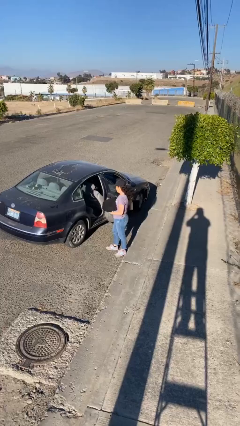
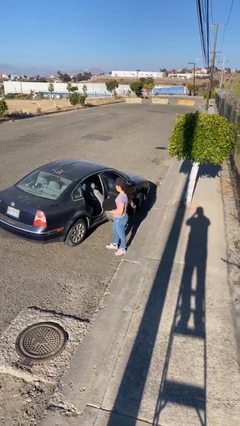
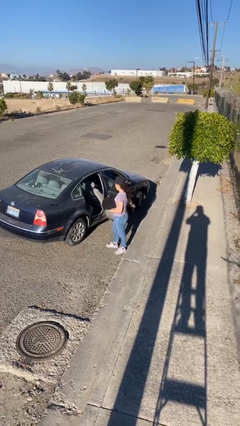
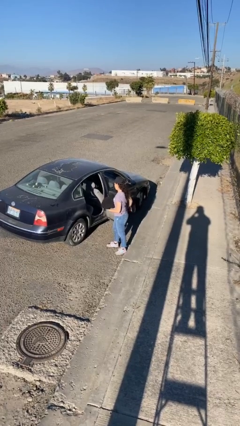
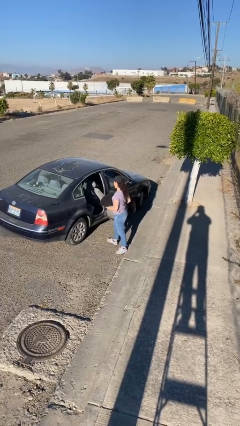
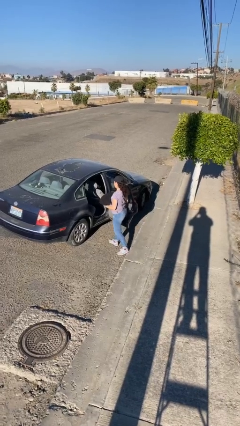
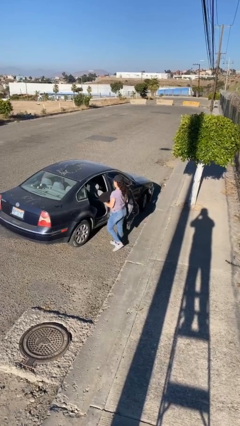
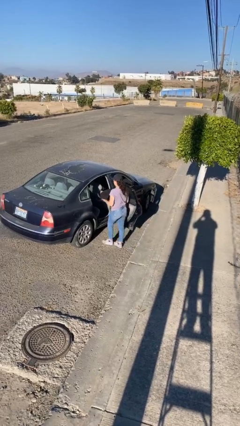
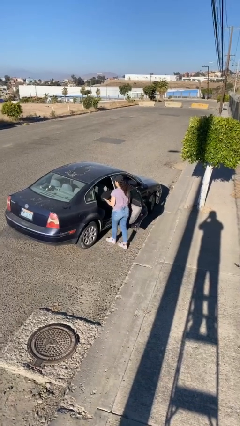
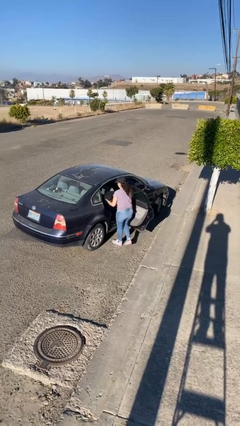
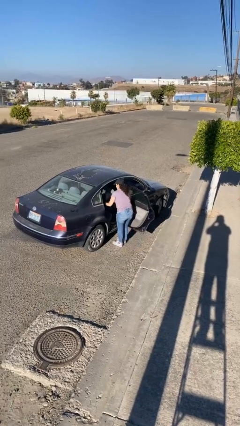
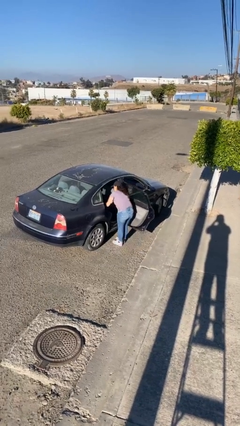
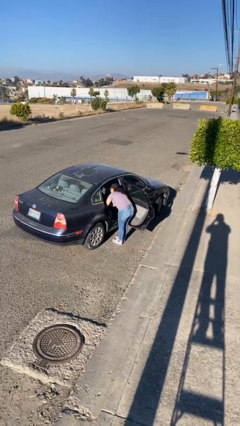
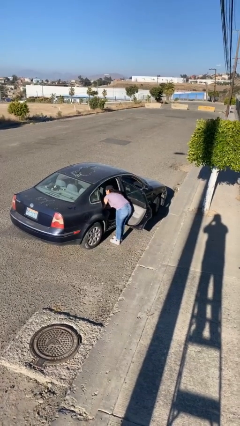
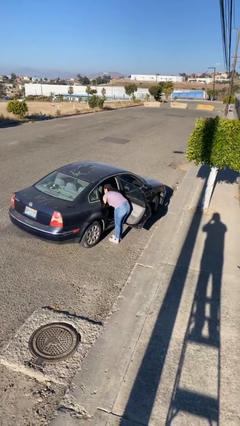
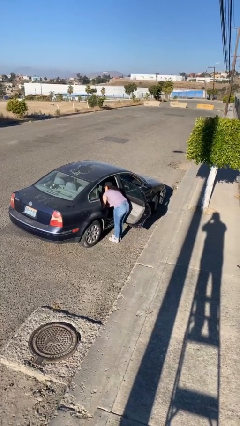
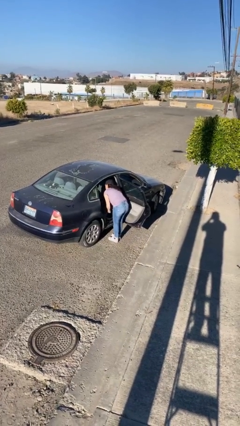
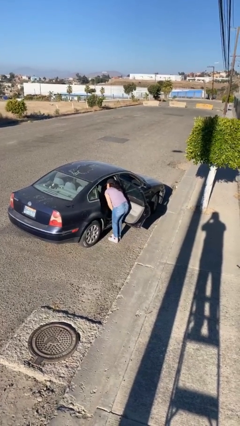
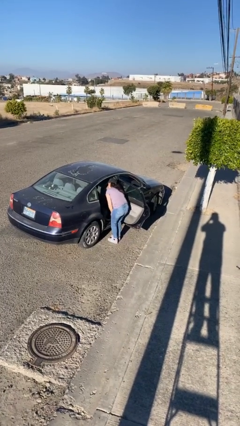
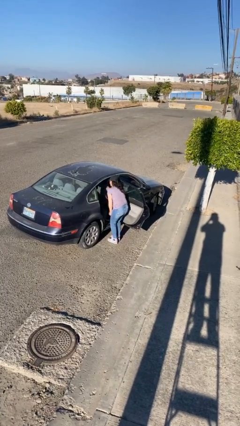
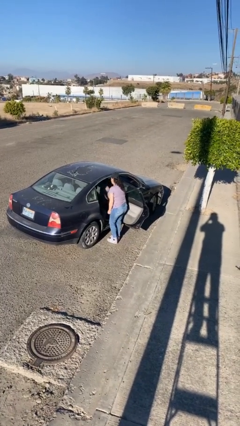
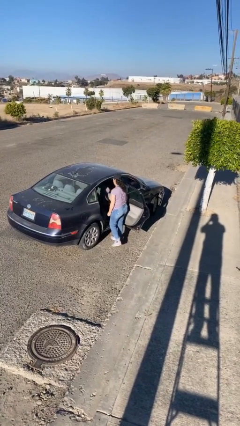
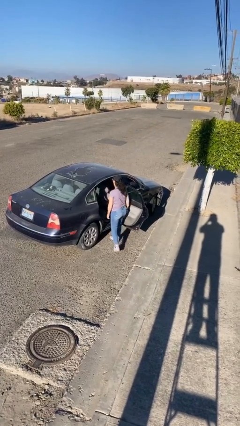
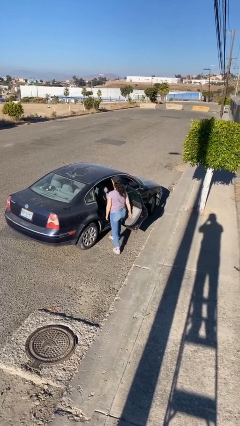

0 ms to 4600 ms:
person loads car

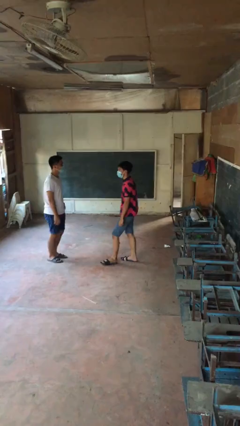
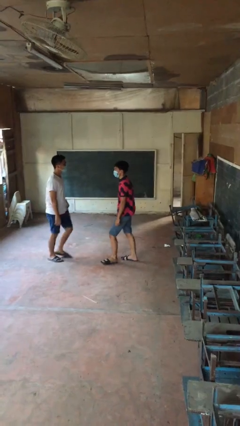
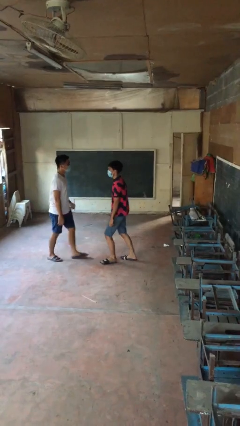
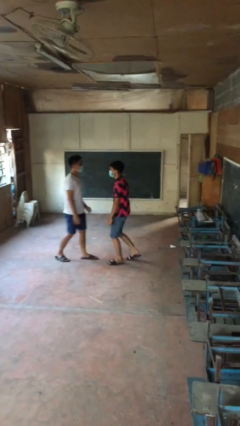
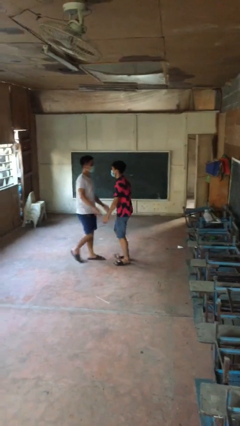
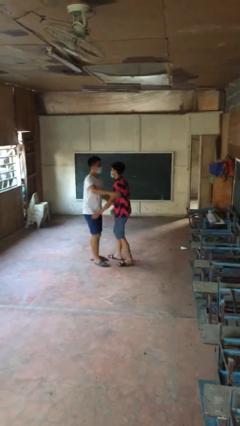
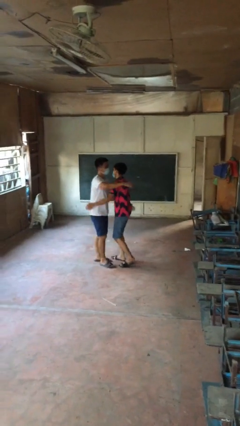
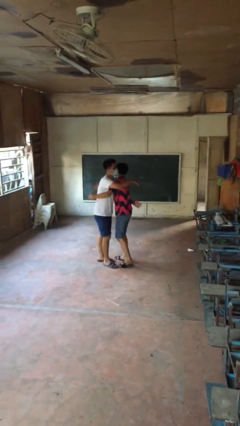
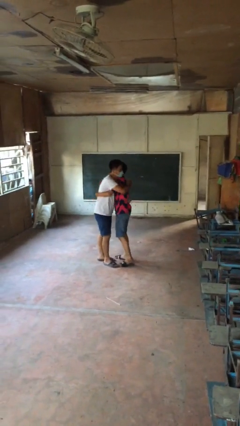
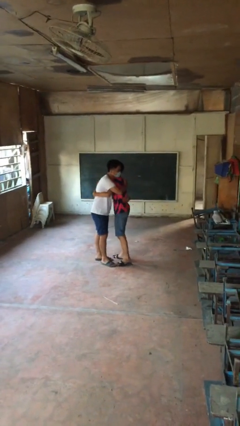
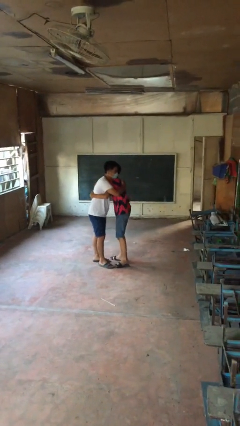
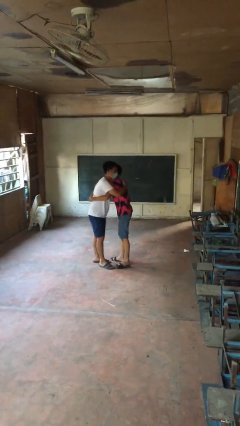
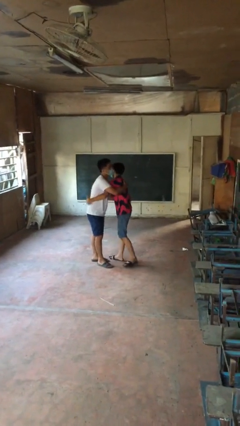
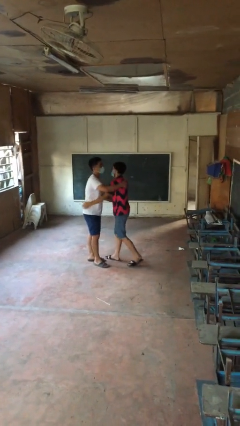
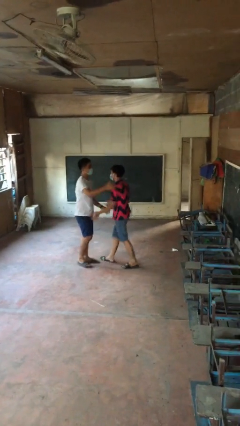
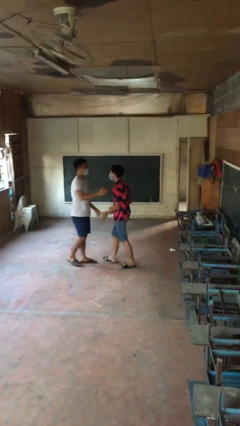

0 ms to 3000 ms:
person embraces person

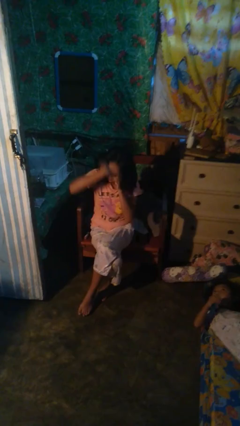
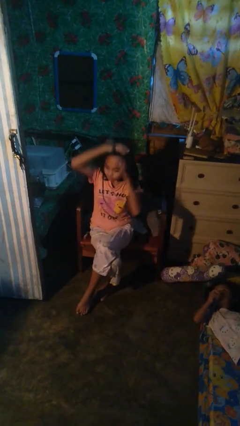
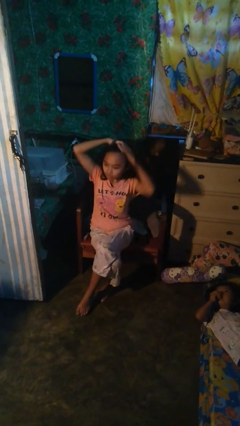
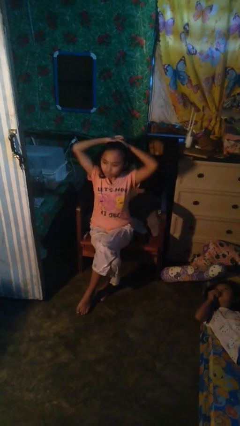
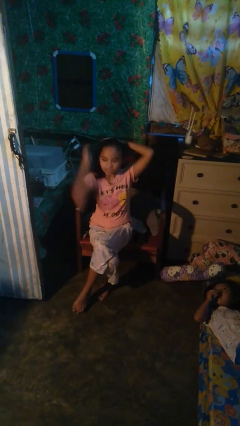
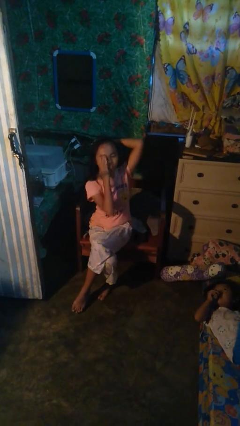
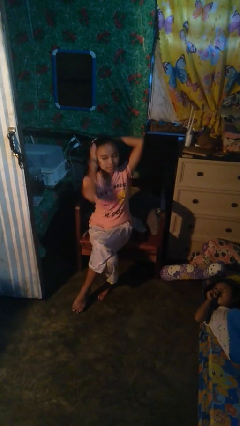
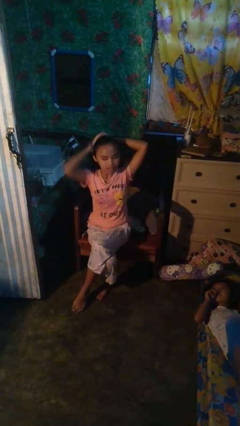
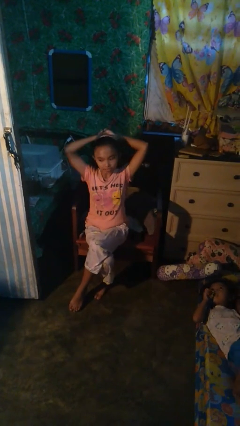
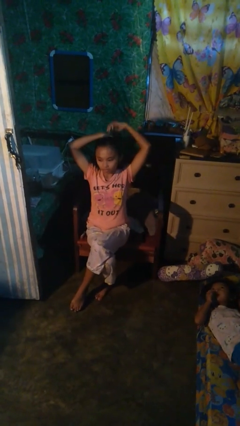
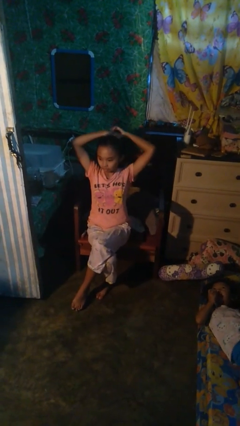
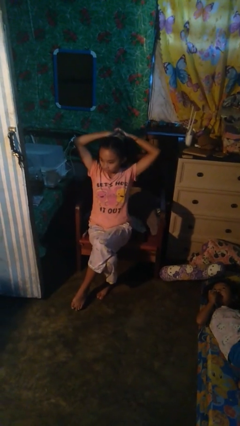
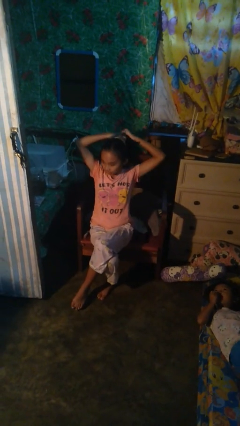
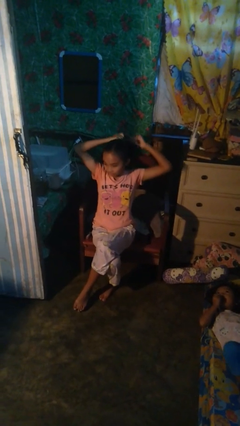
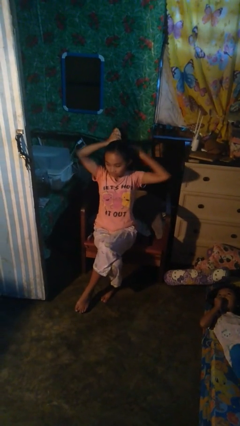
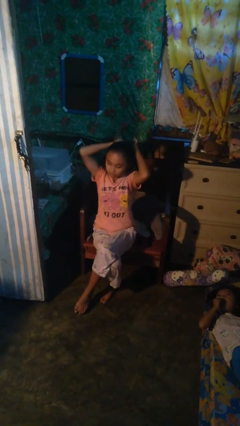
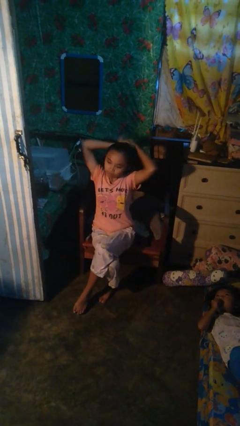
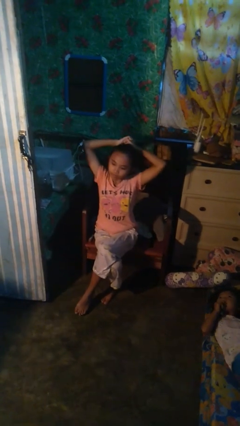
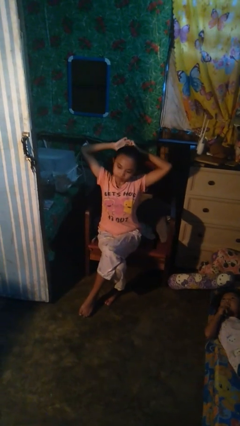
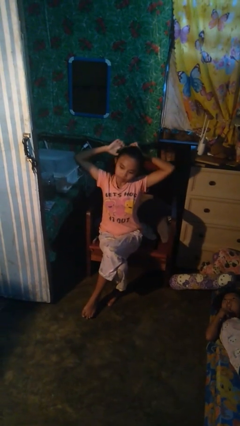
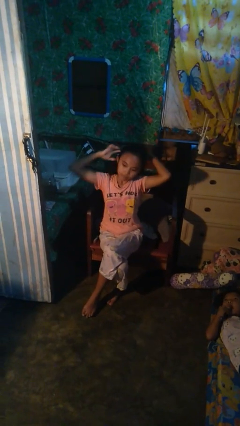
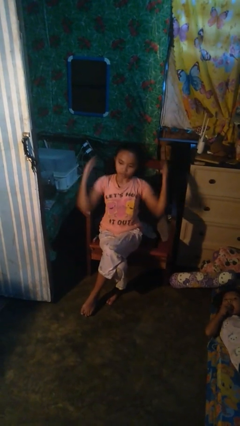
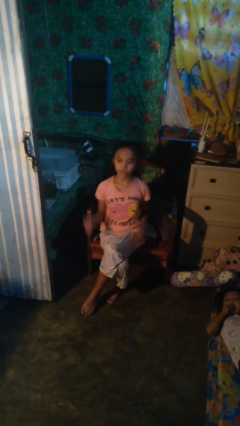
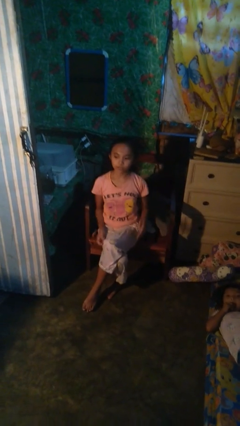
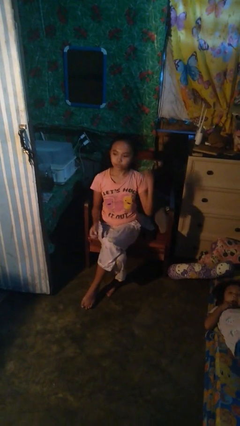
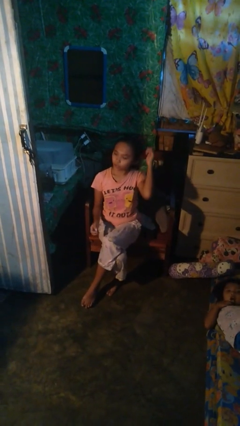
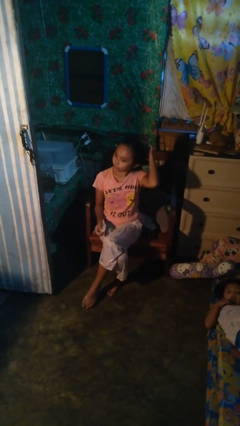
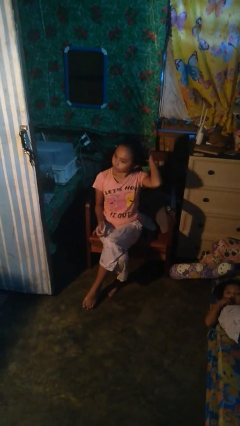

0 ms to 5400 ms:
person puts hair in ponytail

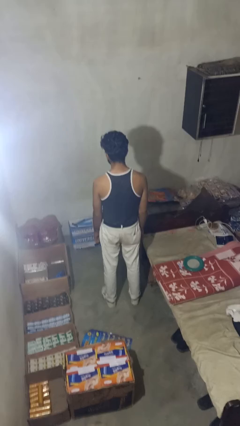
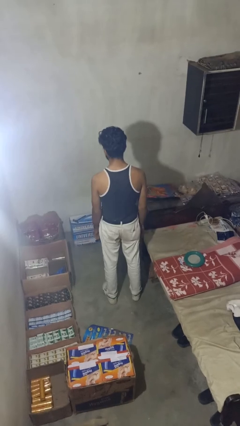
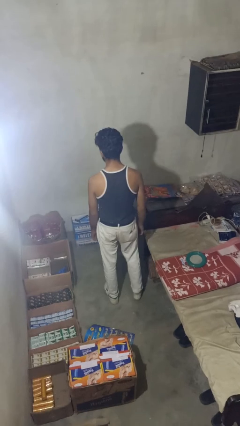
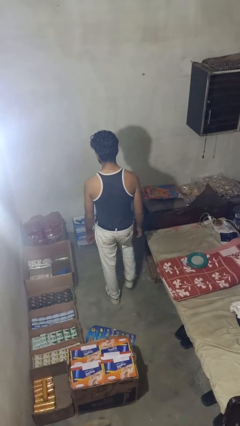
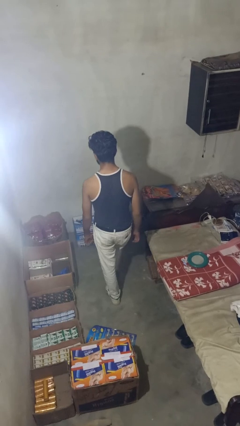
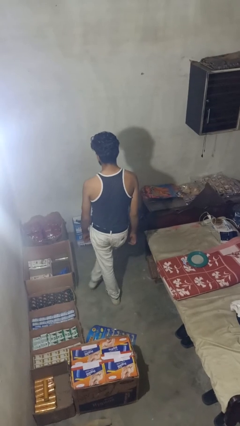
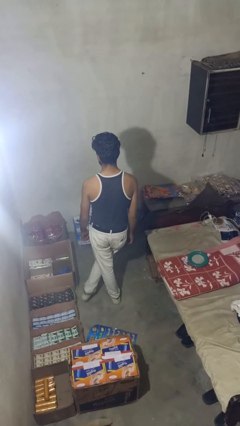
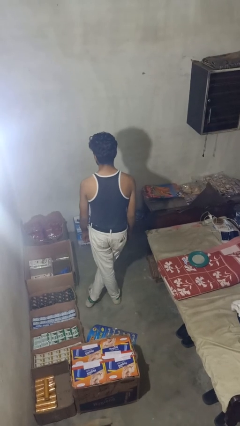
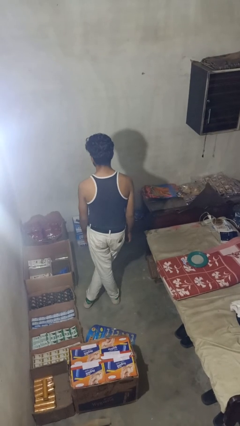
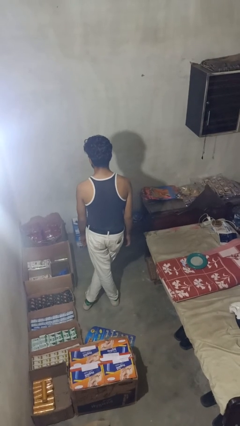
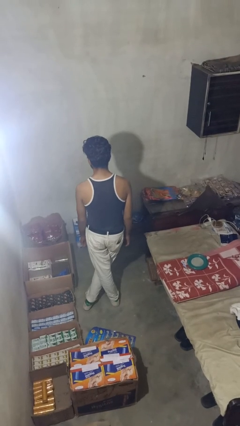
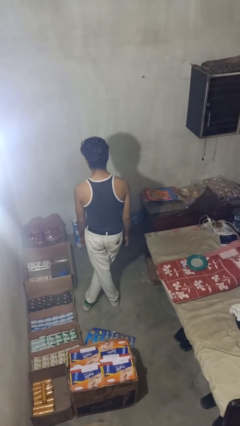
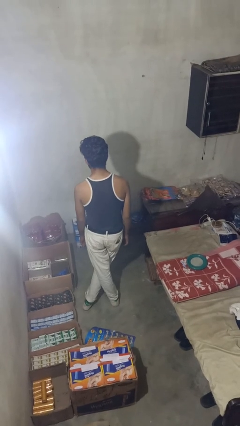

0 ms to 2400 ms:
person crosses legs

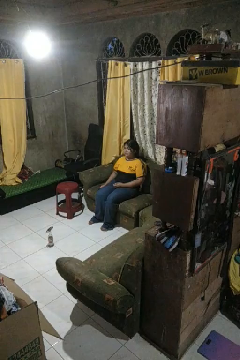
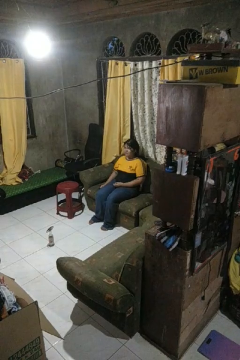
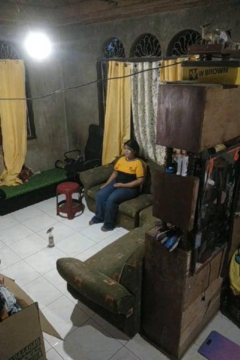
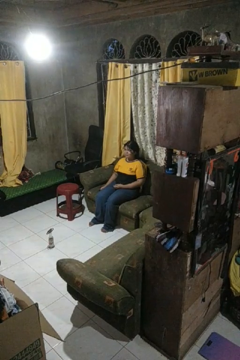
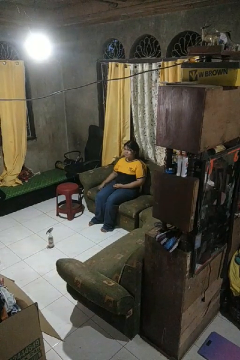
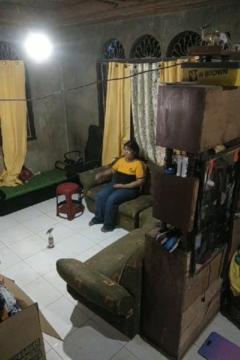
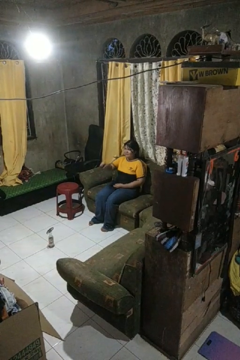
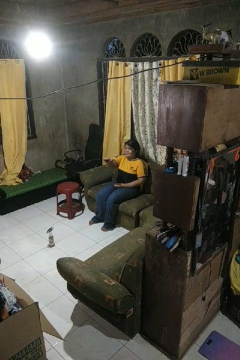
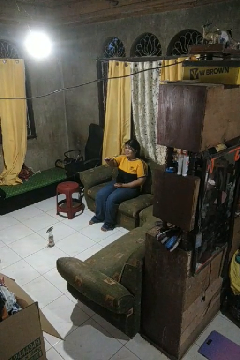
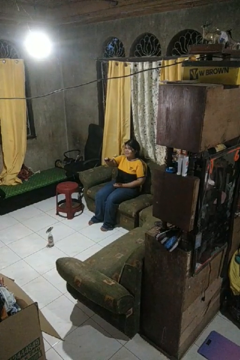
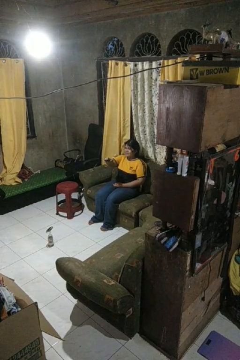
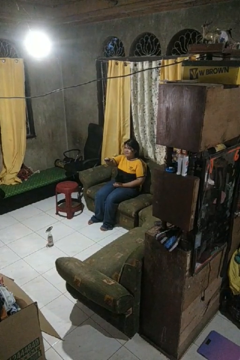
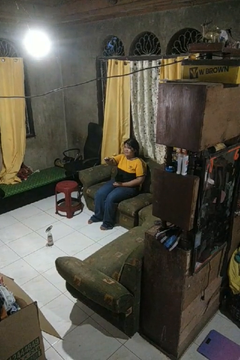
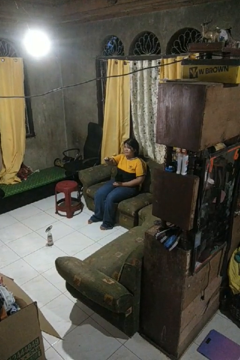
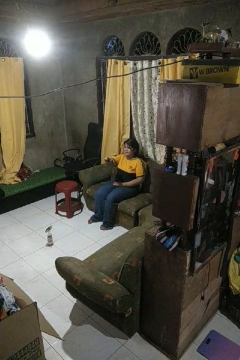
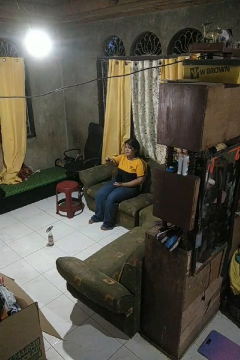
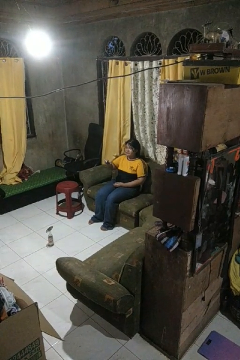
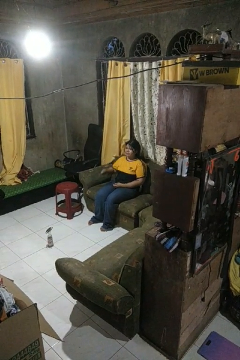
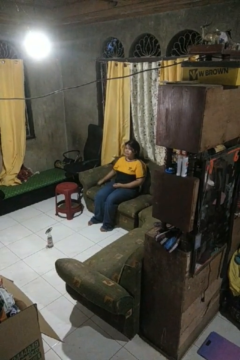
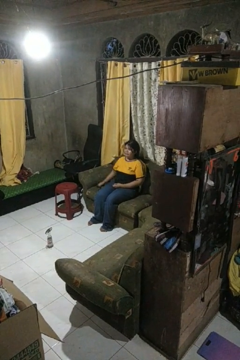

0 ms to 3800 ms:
person uses television remote
